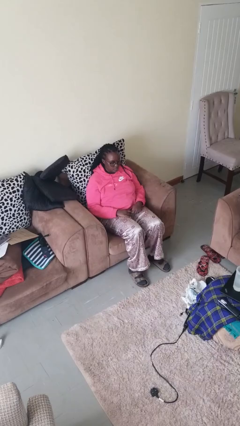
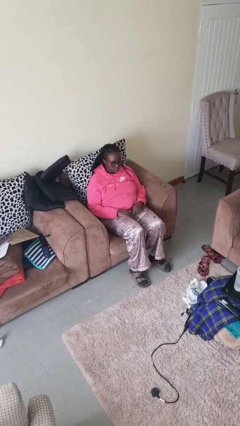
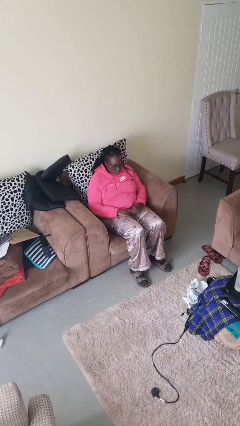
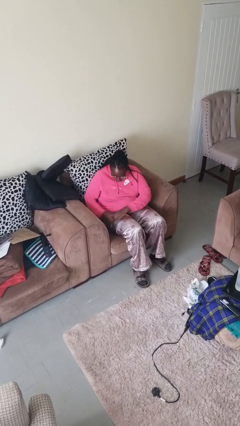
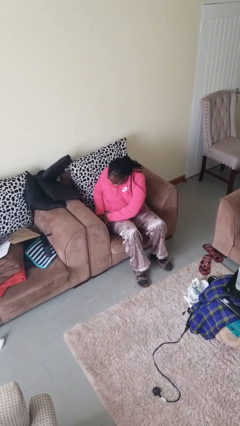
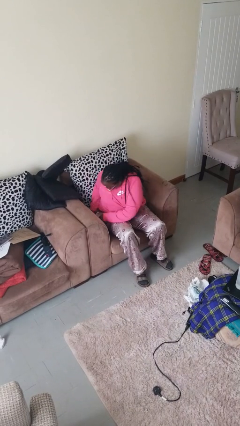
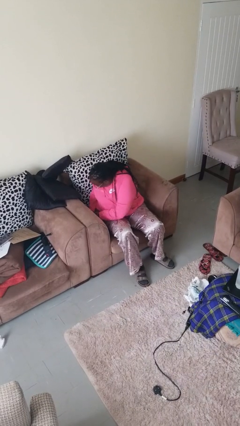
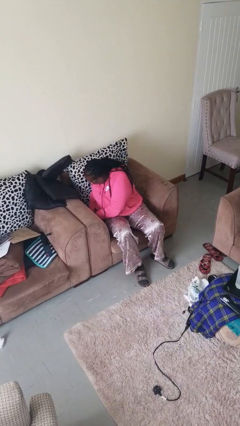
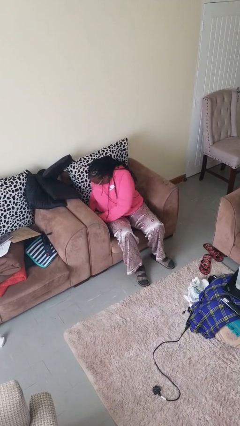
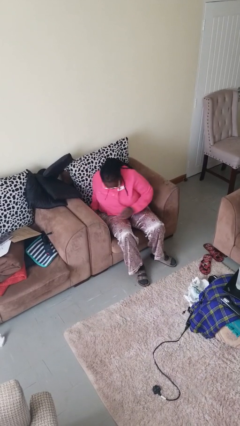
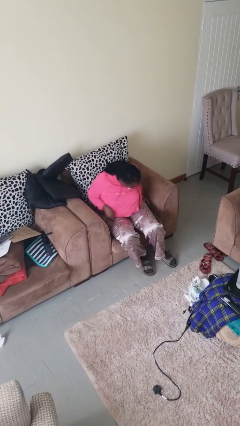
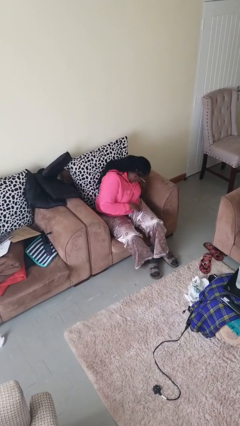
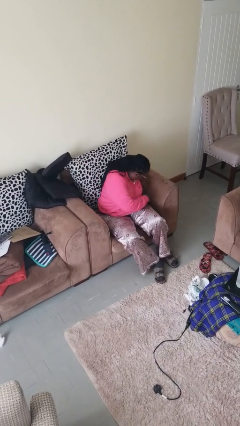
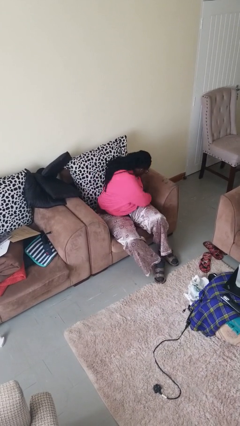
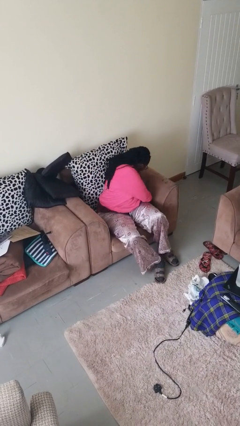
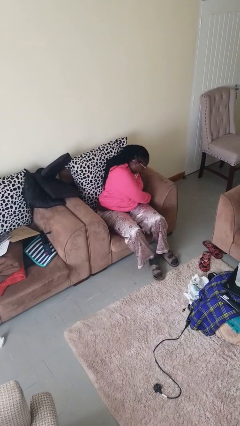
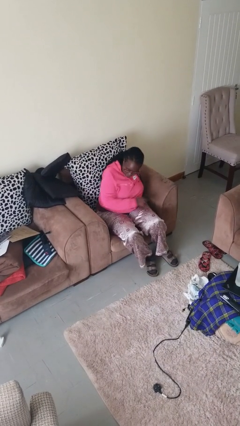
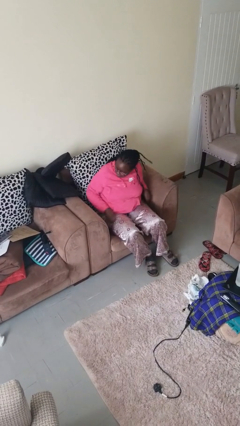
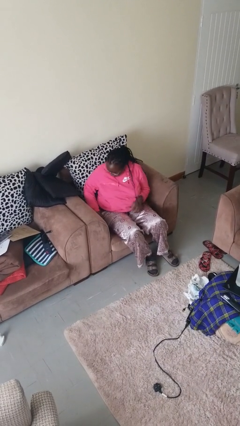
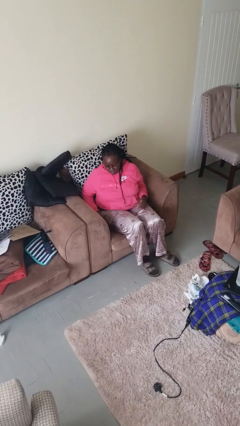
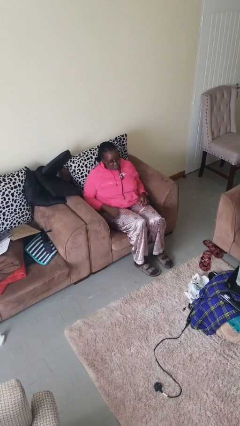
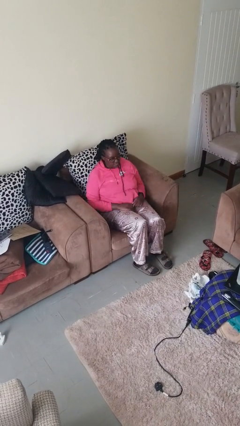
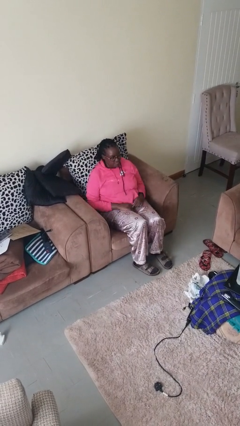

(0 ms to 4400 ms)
person searches in couch

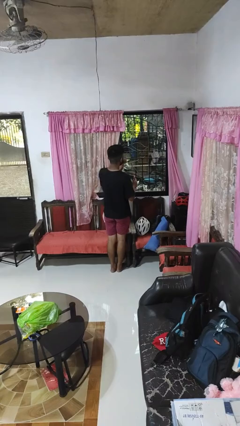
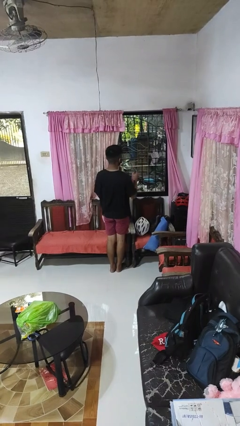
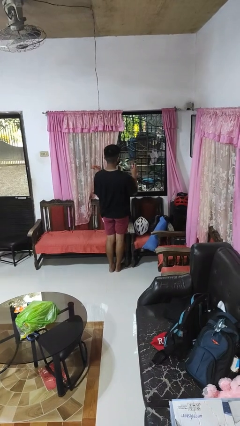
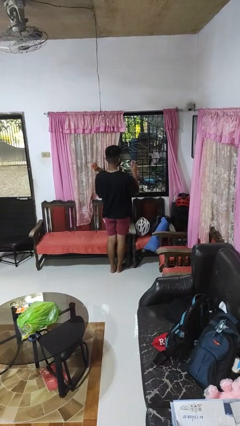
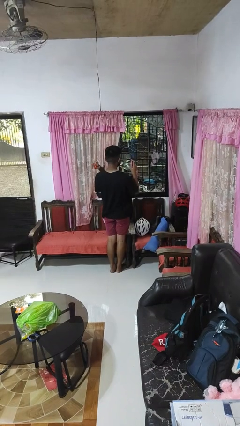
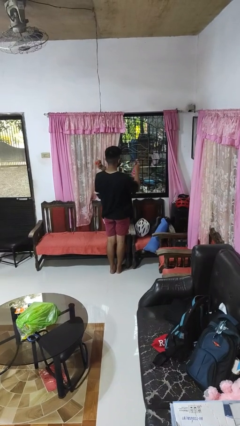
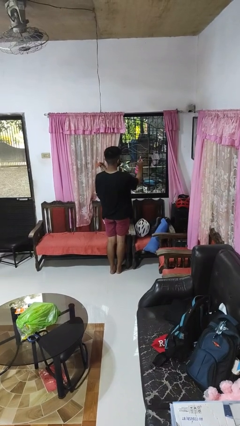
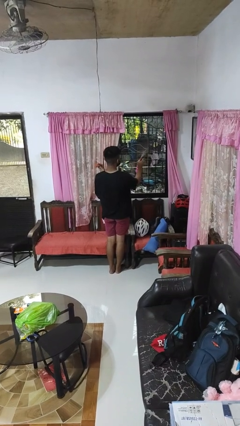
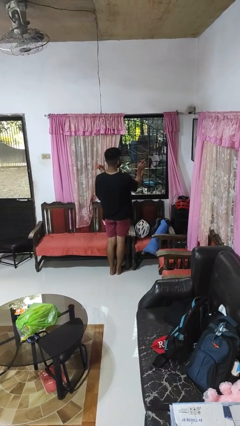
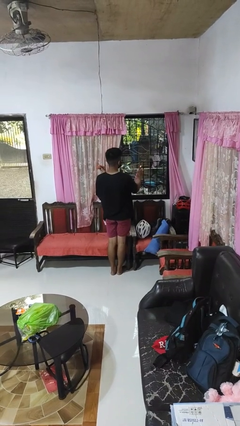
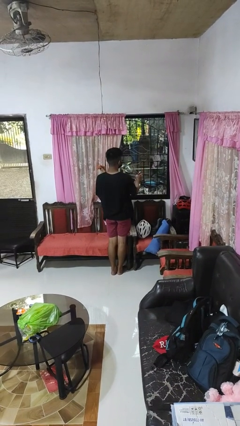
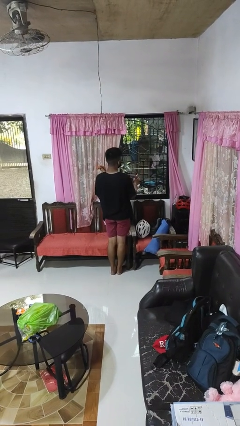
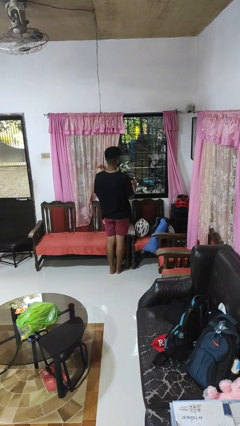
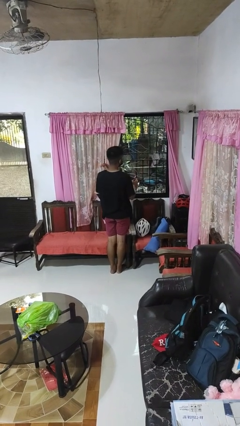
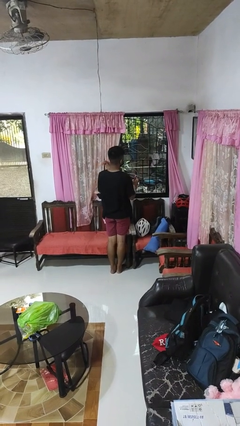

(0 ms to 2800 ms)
person sprays from bottle

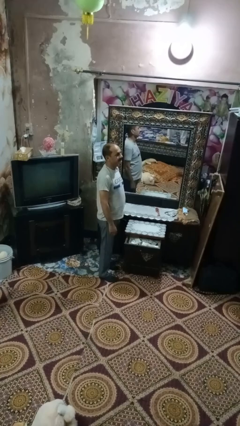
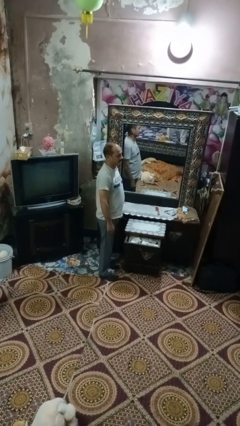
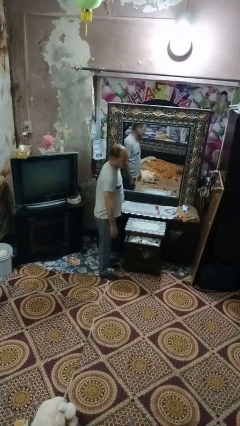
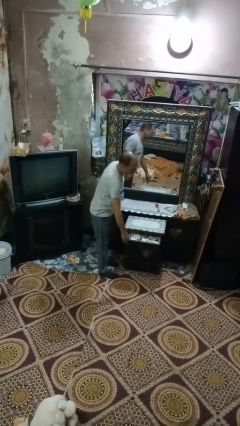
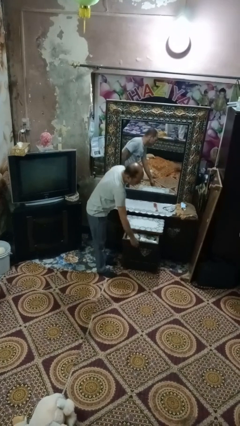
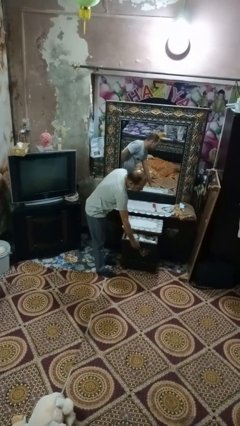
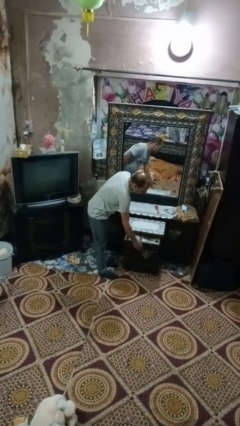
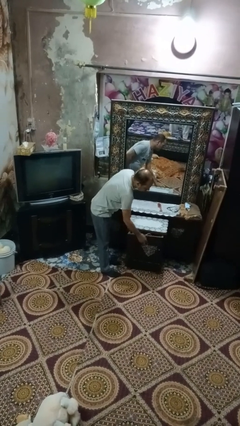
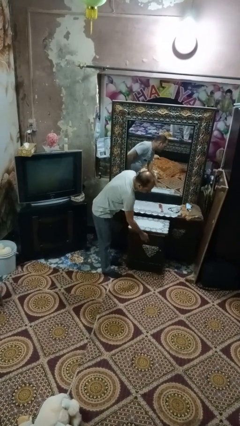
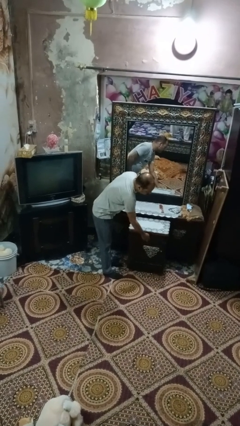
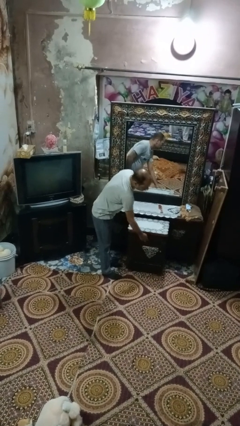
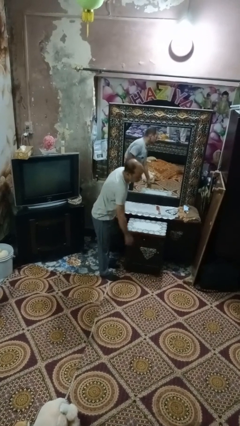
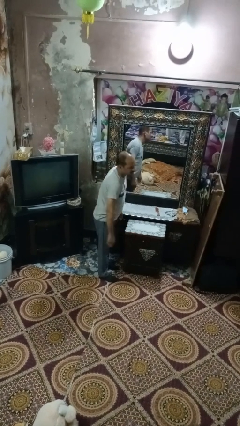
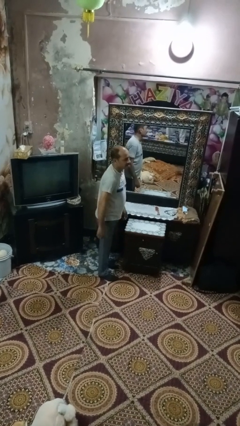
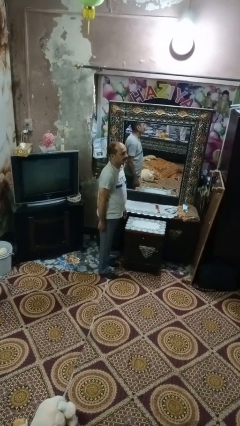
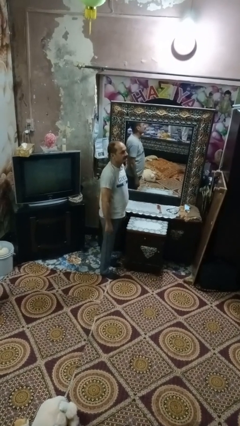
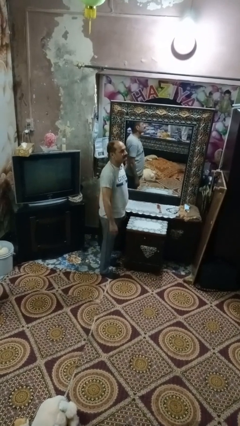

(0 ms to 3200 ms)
person closes dresser drawer

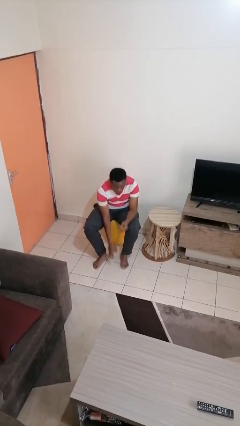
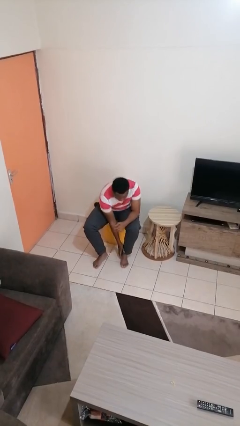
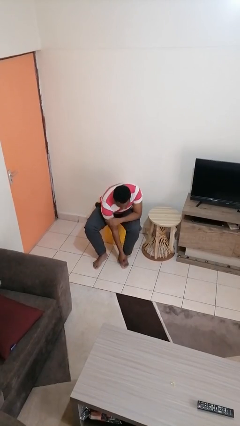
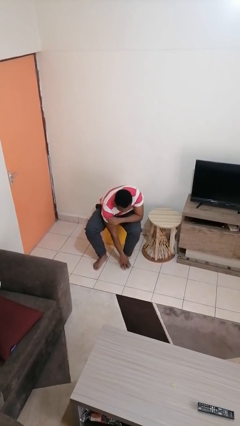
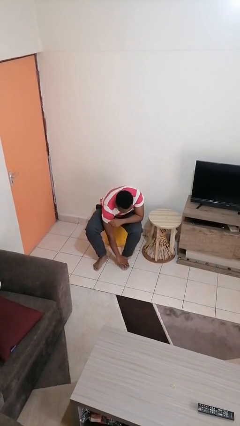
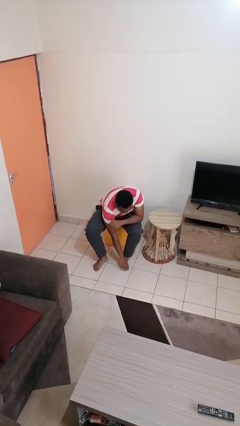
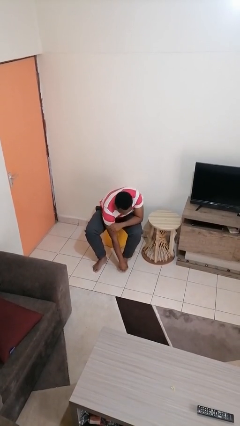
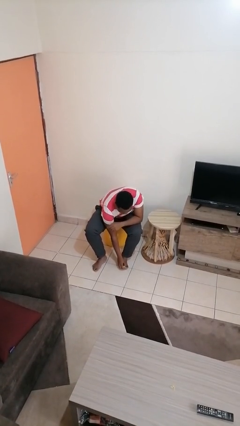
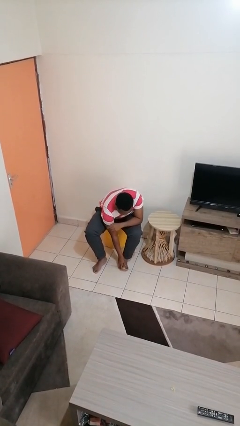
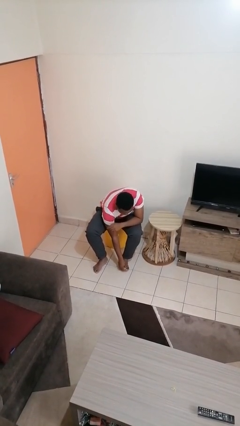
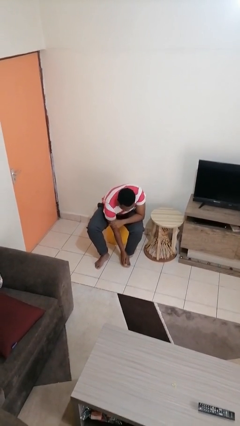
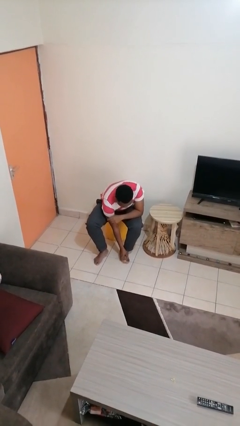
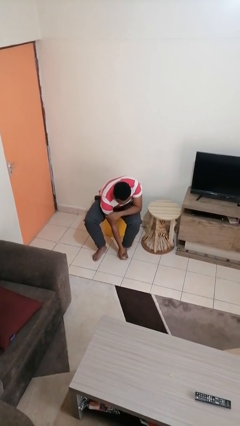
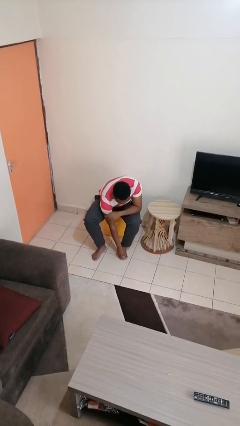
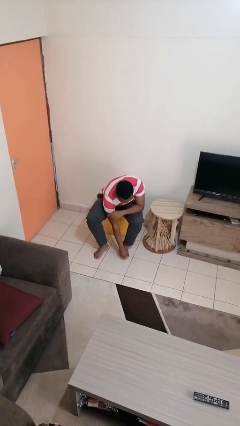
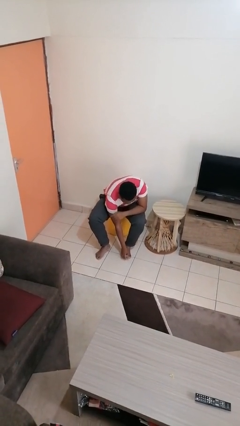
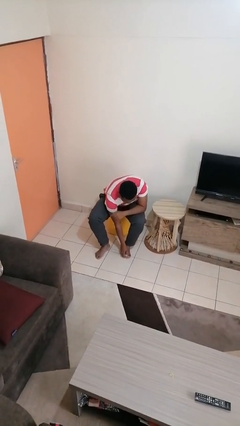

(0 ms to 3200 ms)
person rubs foot

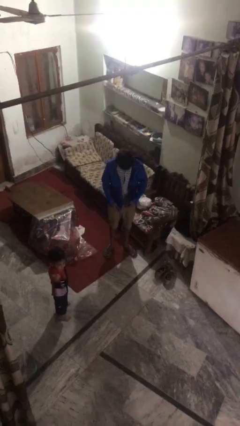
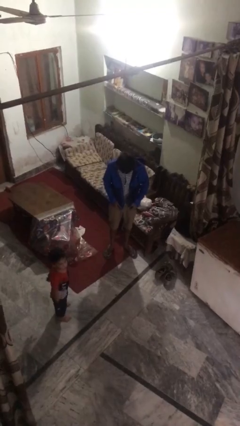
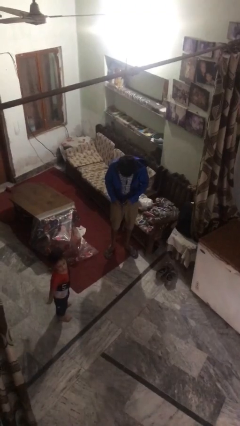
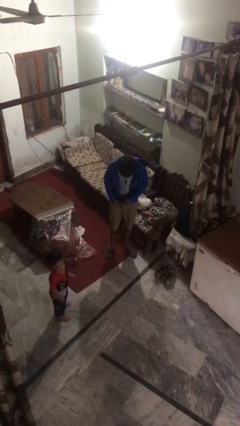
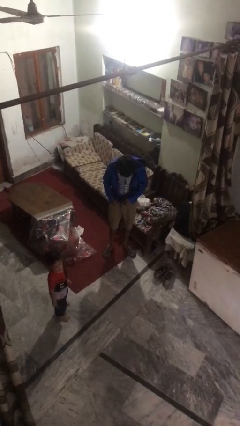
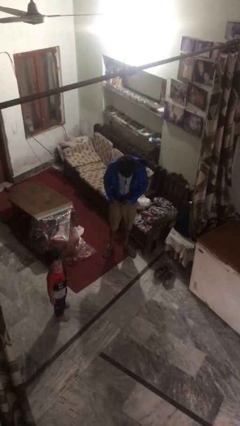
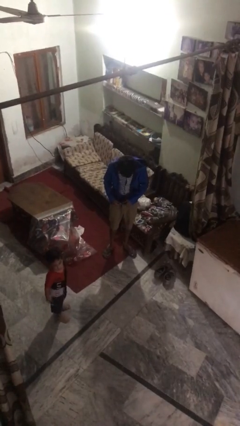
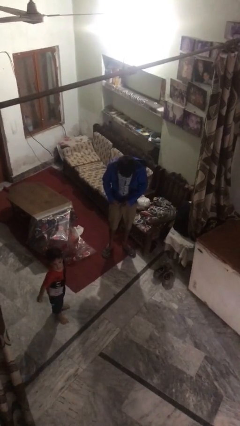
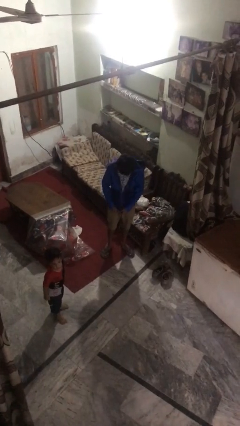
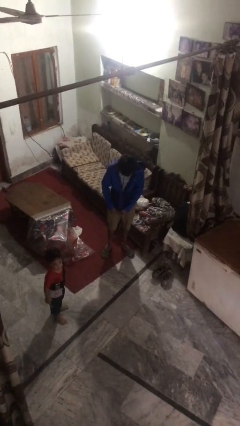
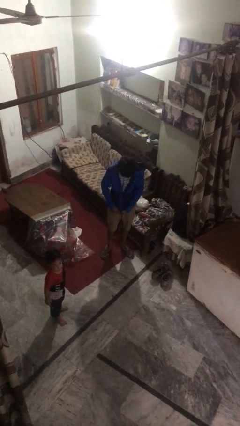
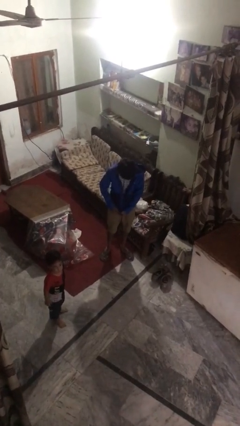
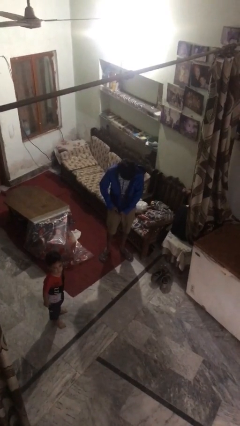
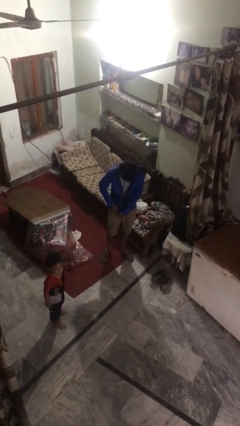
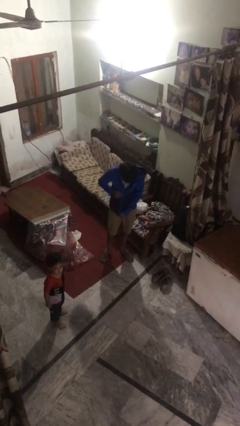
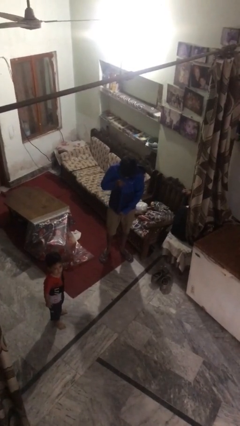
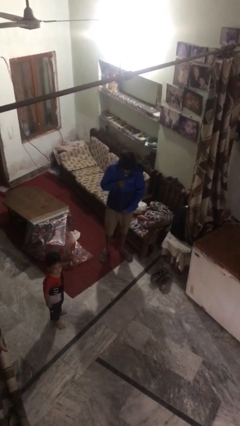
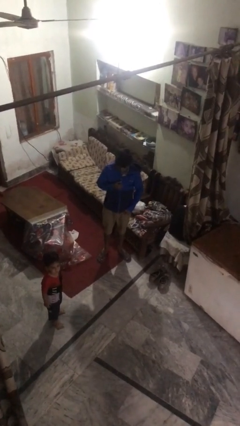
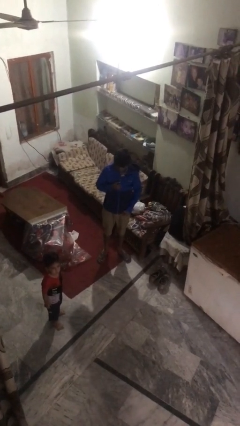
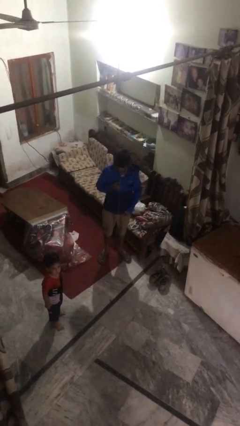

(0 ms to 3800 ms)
person zips up jacket
